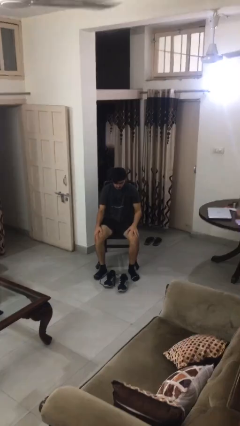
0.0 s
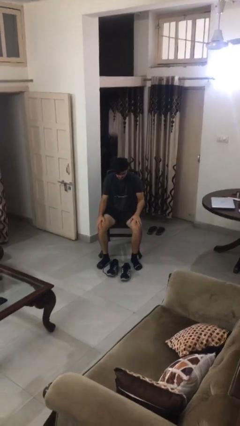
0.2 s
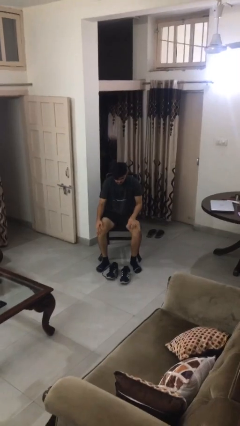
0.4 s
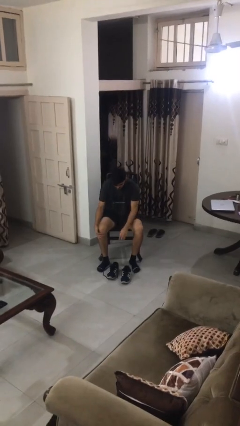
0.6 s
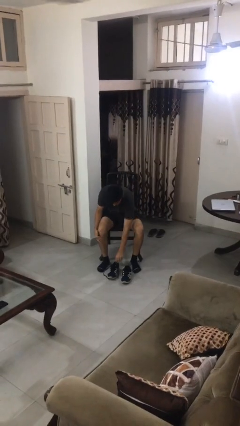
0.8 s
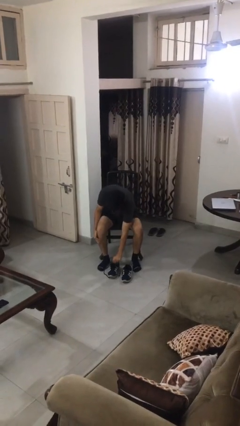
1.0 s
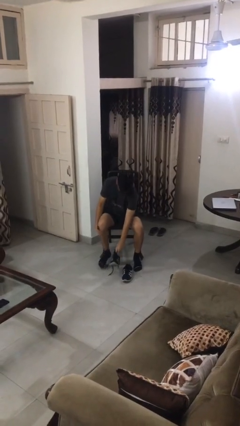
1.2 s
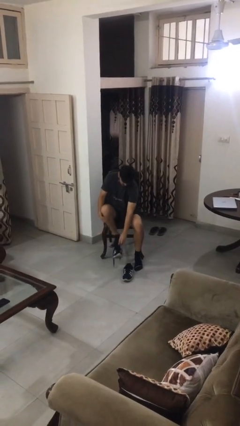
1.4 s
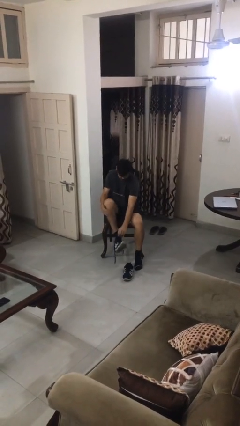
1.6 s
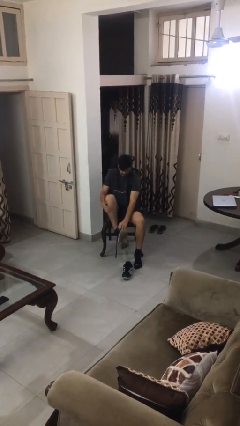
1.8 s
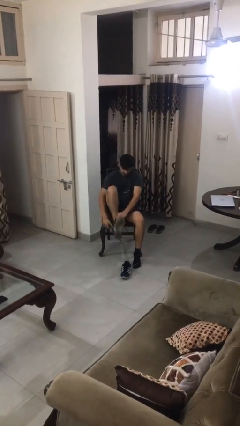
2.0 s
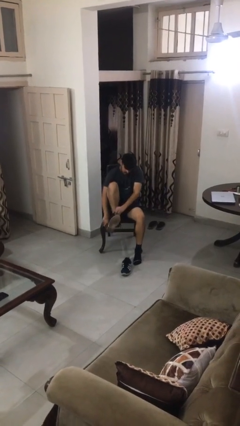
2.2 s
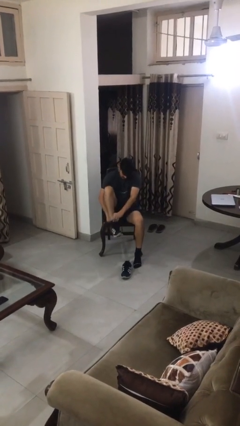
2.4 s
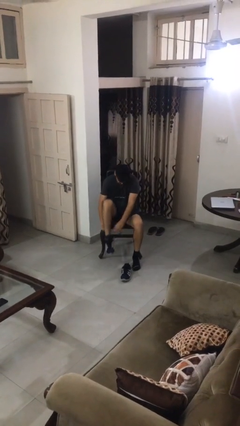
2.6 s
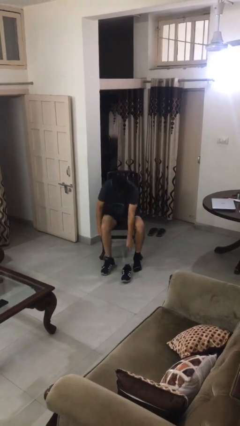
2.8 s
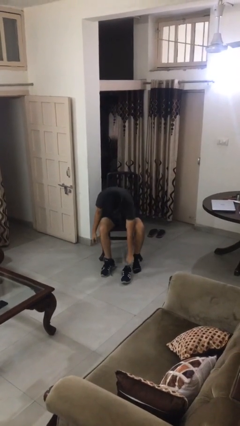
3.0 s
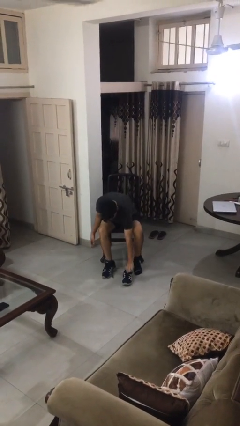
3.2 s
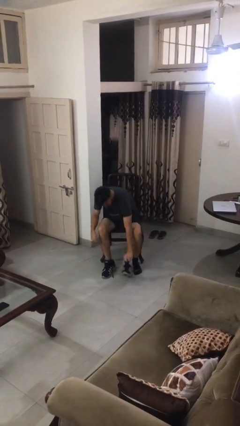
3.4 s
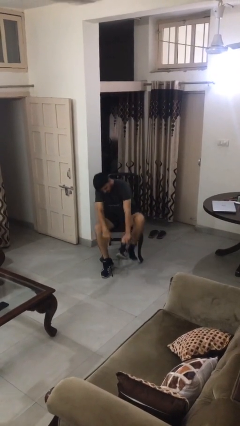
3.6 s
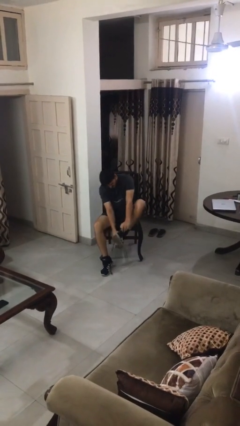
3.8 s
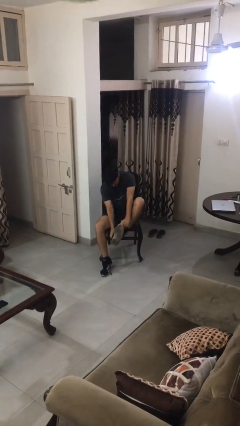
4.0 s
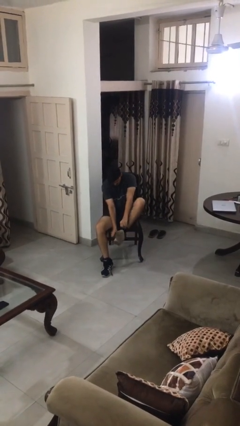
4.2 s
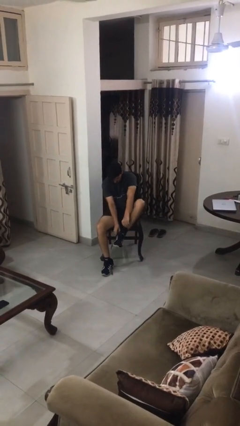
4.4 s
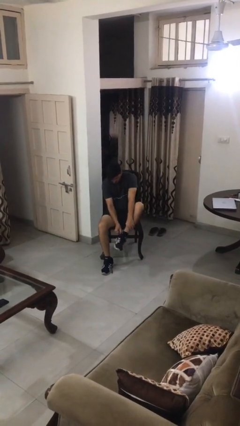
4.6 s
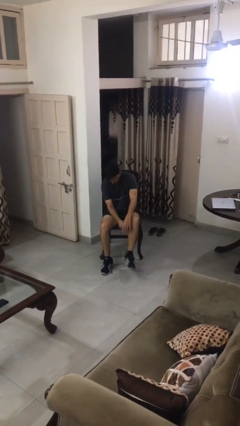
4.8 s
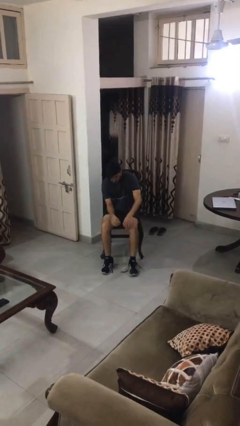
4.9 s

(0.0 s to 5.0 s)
person puts on shoes

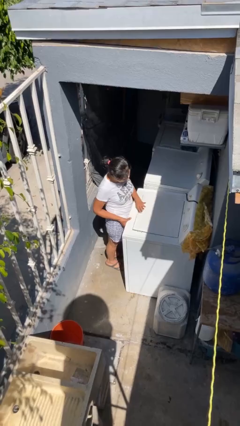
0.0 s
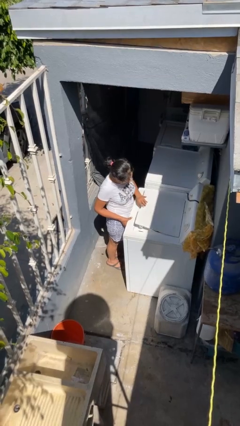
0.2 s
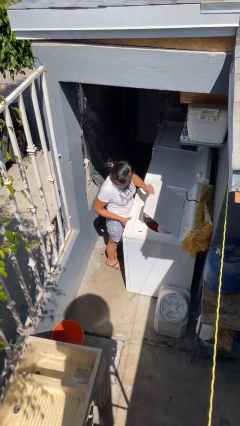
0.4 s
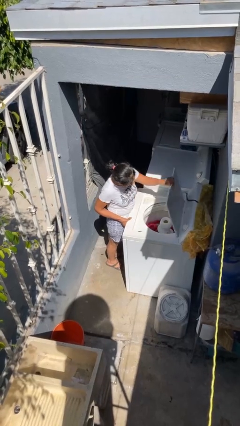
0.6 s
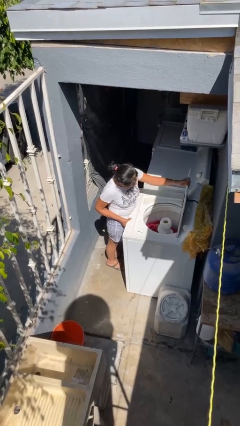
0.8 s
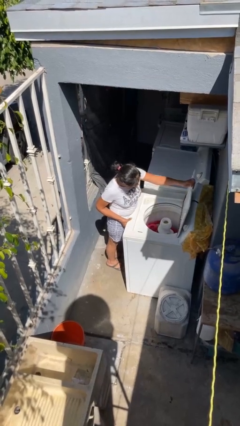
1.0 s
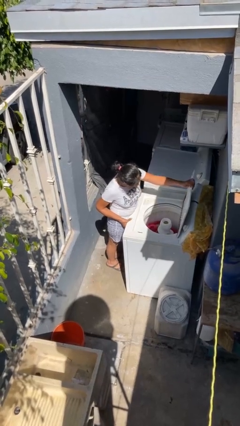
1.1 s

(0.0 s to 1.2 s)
person opens clothes washer

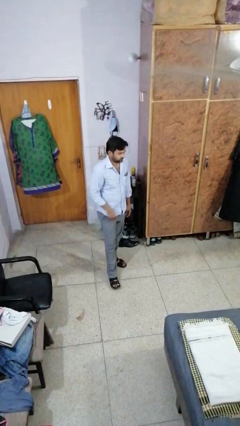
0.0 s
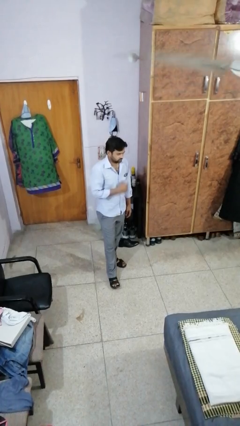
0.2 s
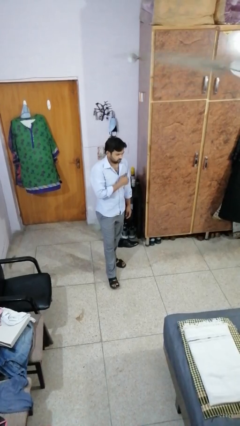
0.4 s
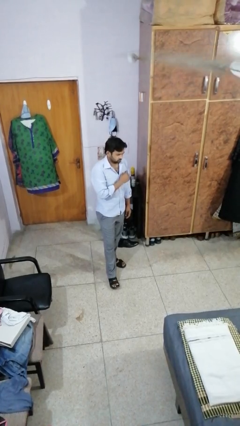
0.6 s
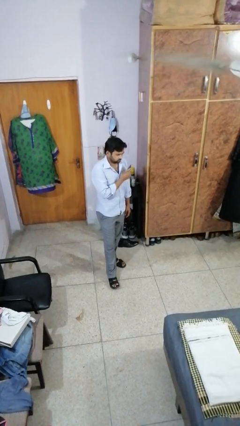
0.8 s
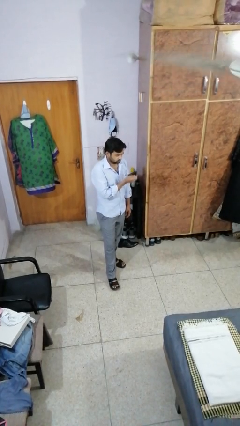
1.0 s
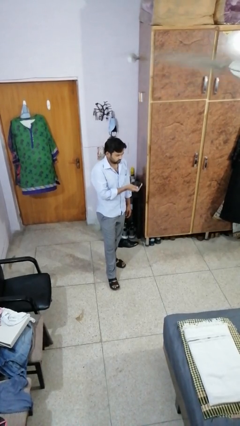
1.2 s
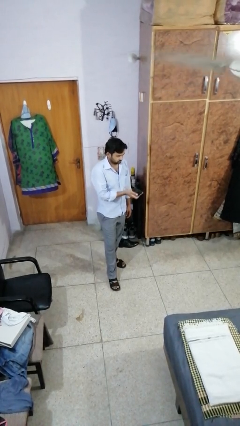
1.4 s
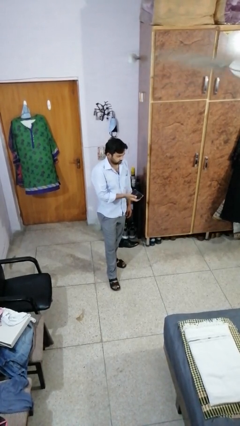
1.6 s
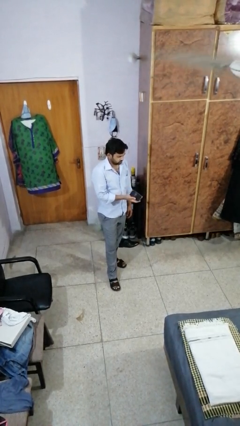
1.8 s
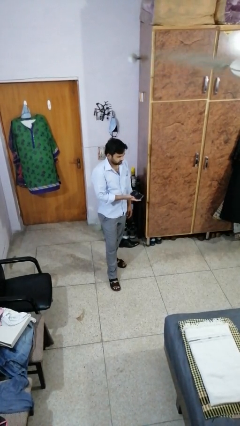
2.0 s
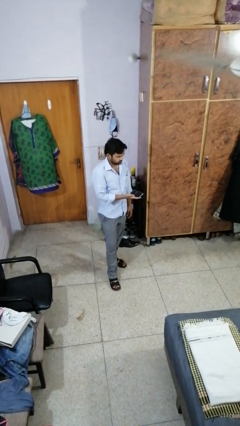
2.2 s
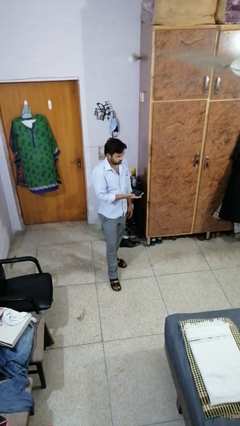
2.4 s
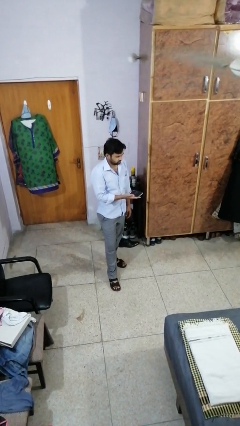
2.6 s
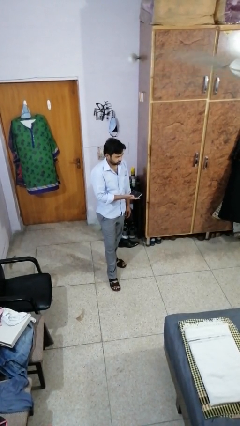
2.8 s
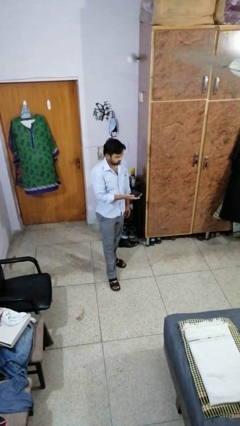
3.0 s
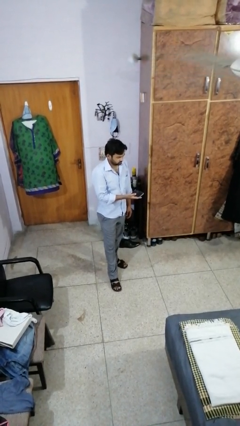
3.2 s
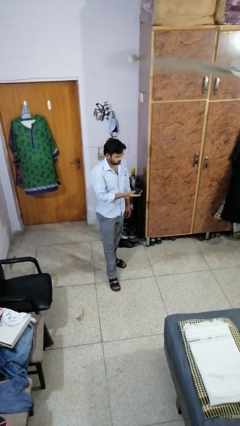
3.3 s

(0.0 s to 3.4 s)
person takes phone from pocket

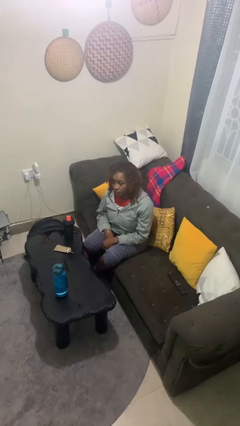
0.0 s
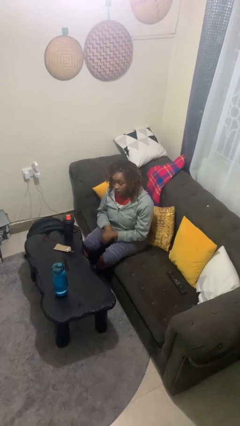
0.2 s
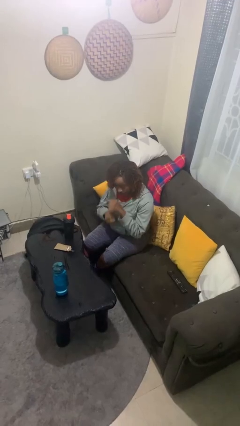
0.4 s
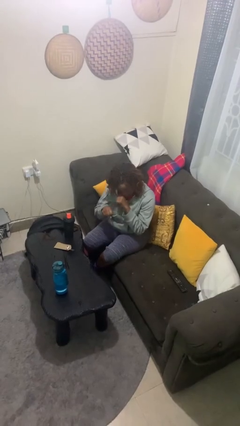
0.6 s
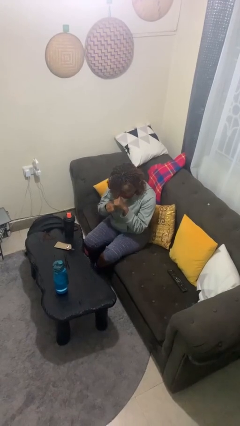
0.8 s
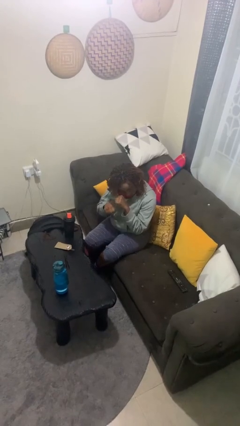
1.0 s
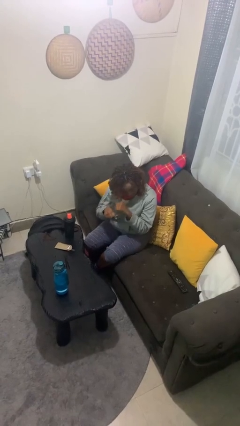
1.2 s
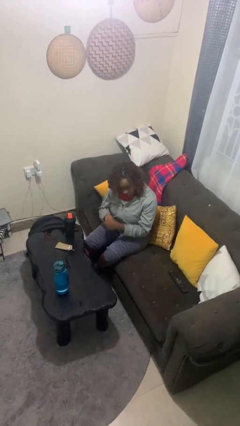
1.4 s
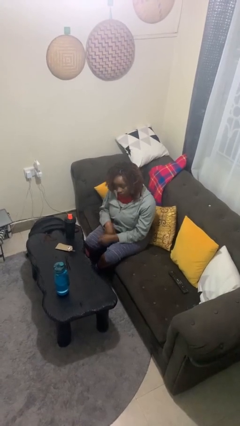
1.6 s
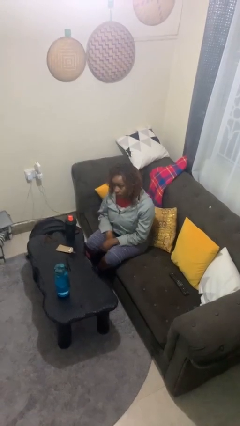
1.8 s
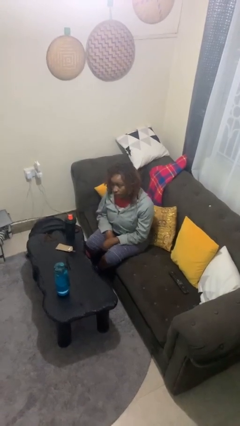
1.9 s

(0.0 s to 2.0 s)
person punches

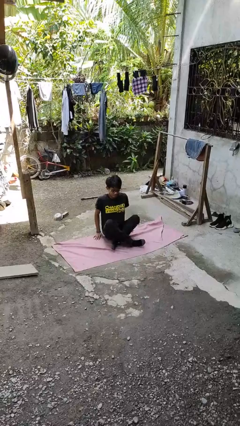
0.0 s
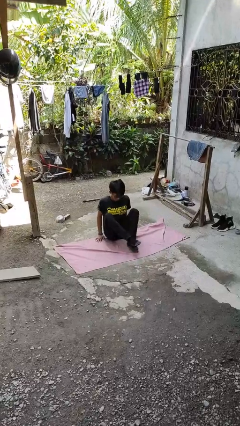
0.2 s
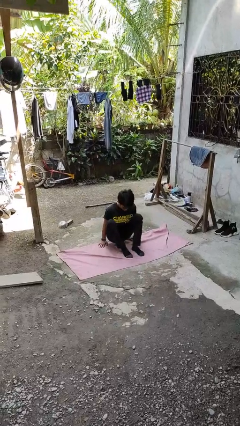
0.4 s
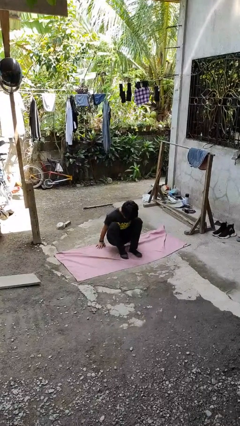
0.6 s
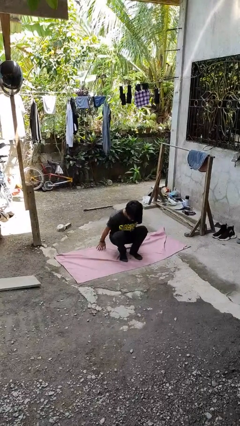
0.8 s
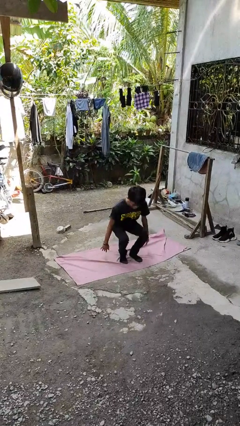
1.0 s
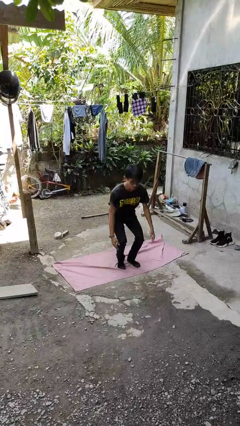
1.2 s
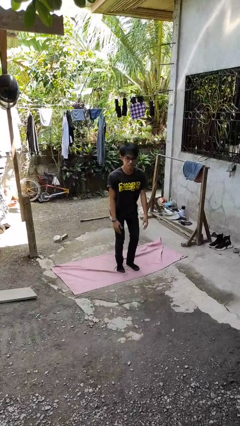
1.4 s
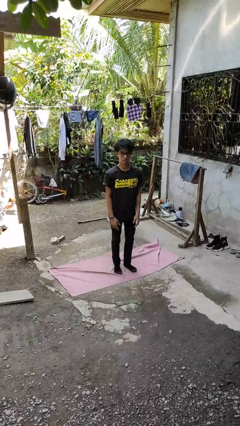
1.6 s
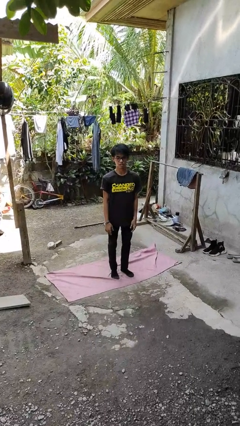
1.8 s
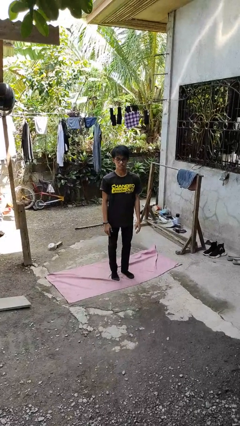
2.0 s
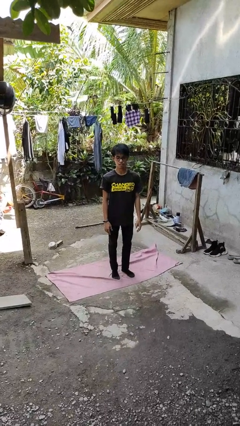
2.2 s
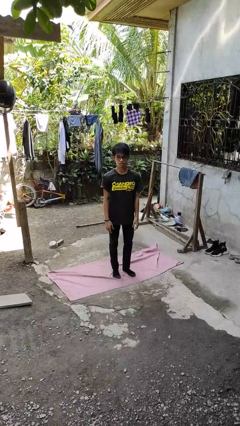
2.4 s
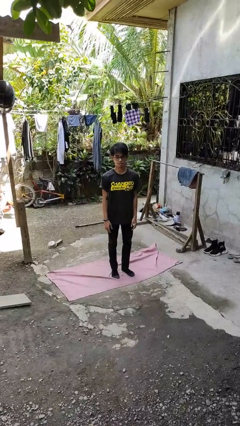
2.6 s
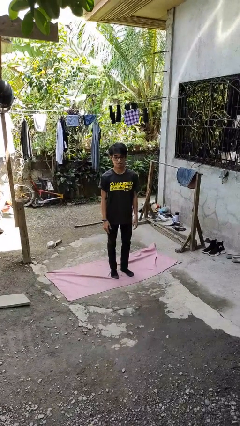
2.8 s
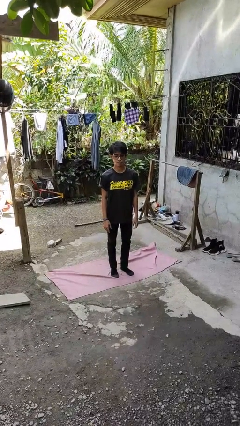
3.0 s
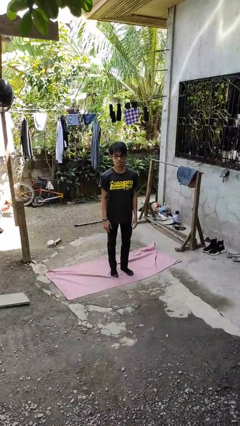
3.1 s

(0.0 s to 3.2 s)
person stands up from floor

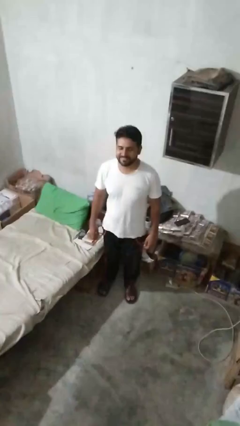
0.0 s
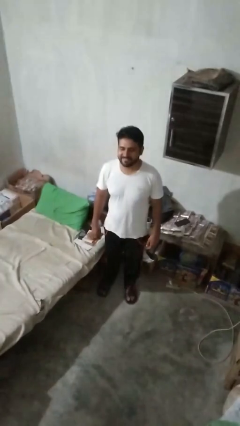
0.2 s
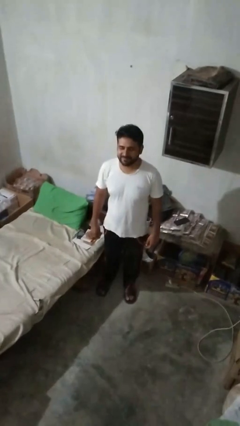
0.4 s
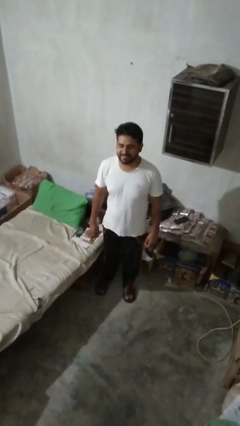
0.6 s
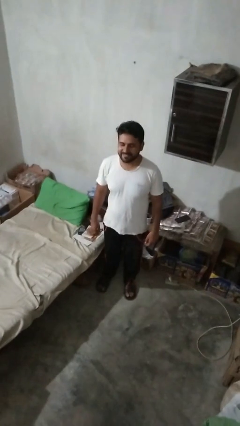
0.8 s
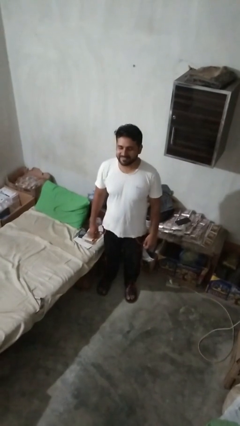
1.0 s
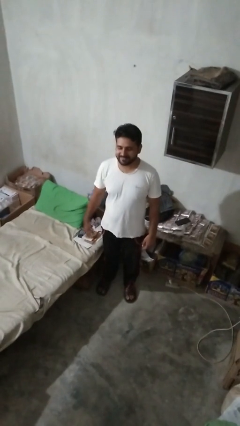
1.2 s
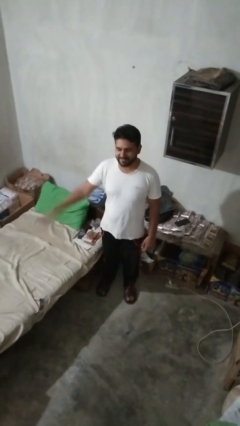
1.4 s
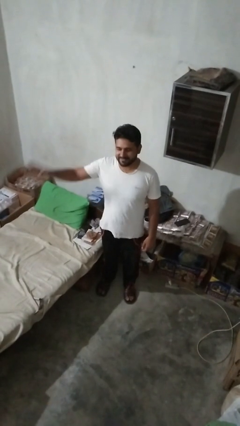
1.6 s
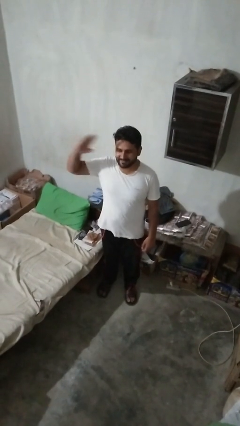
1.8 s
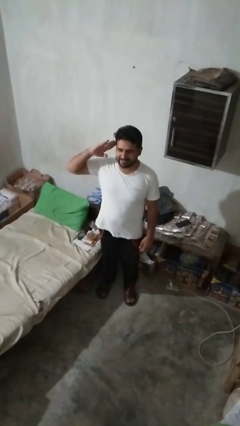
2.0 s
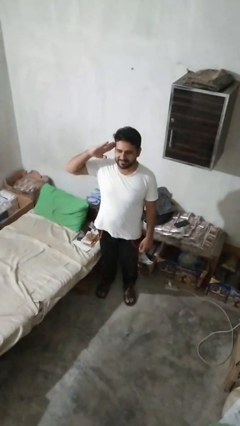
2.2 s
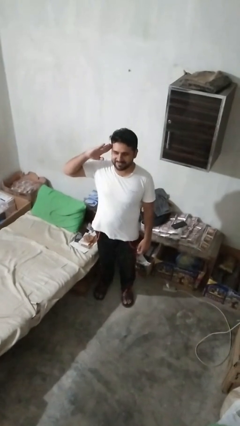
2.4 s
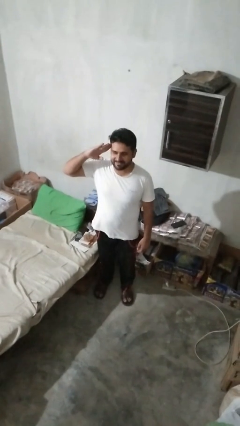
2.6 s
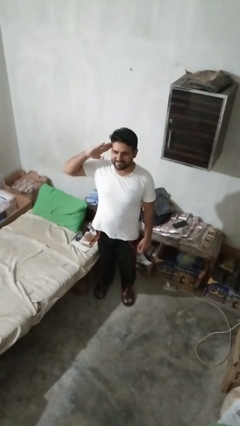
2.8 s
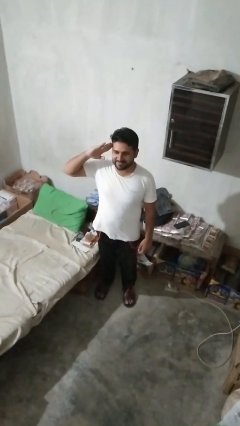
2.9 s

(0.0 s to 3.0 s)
person salutes
